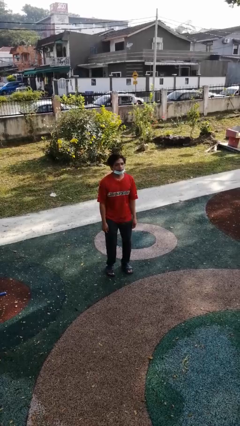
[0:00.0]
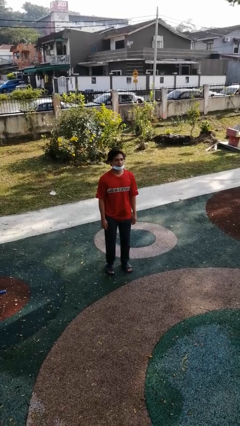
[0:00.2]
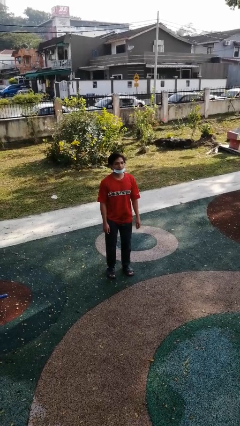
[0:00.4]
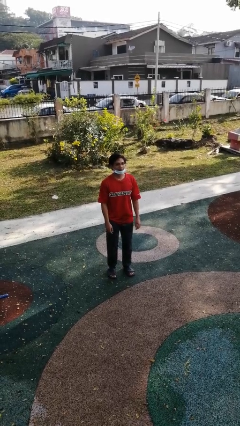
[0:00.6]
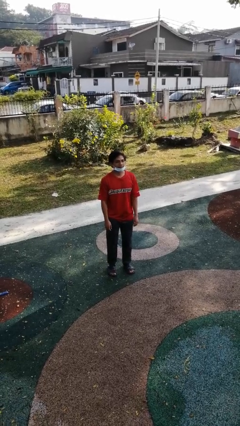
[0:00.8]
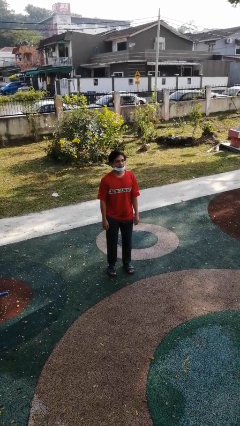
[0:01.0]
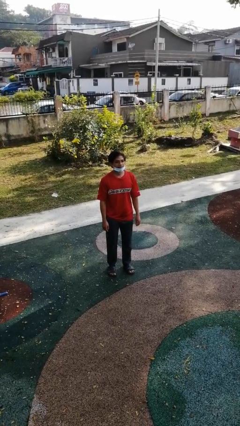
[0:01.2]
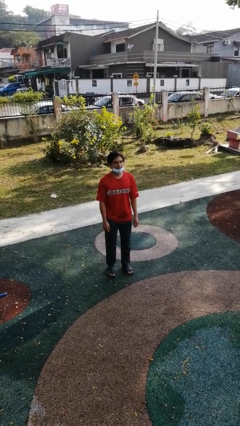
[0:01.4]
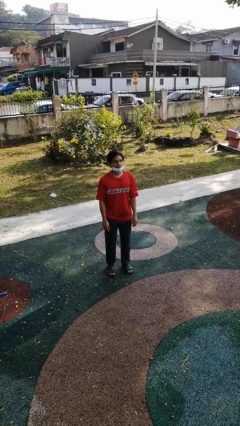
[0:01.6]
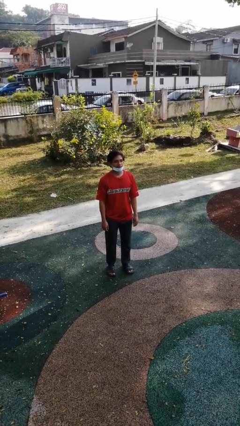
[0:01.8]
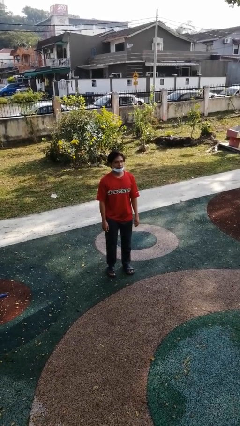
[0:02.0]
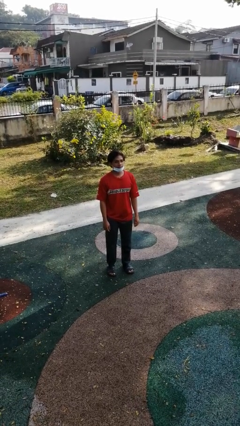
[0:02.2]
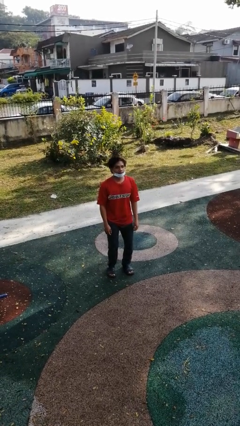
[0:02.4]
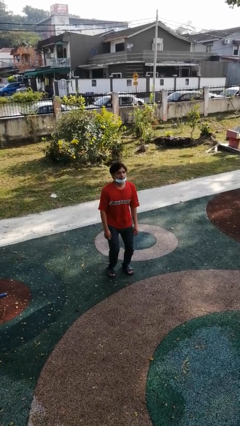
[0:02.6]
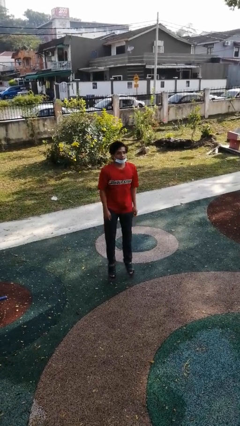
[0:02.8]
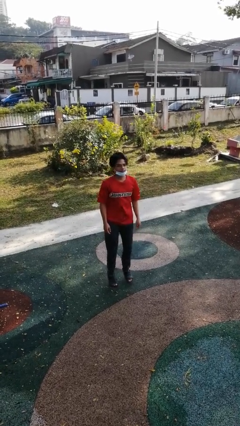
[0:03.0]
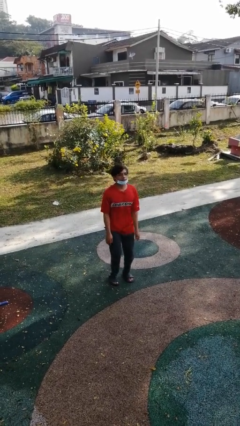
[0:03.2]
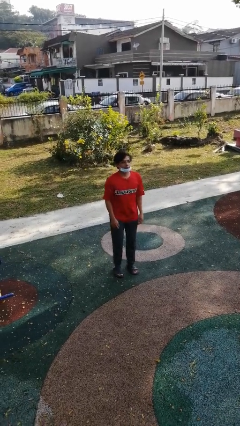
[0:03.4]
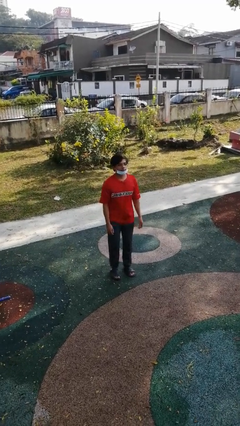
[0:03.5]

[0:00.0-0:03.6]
person jumps

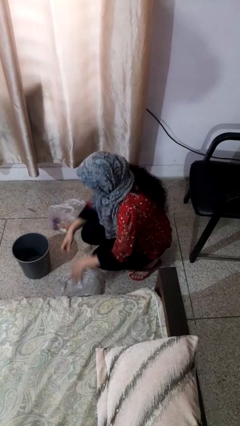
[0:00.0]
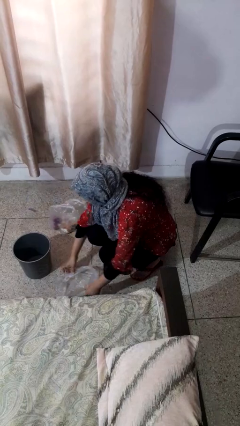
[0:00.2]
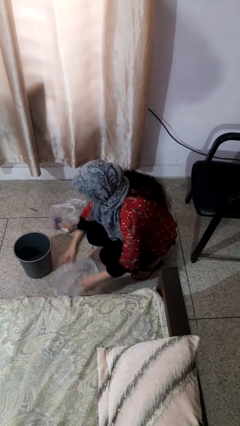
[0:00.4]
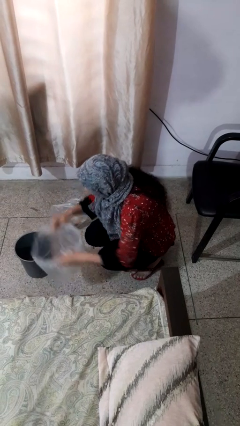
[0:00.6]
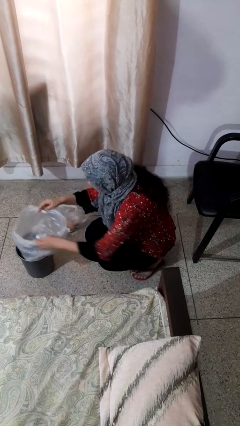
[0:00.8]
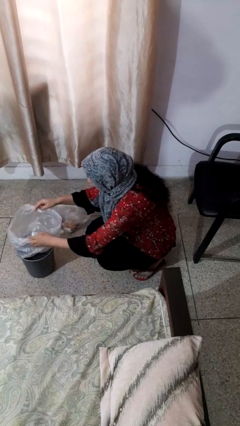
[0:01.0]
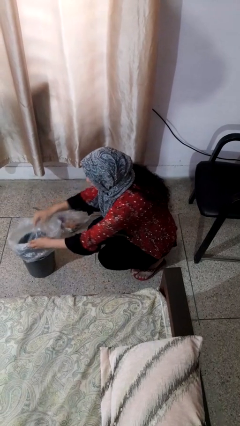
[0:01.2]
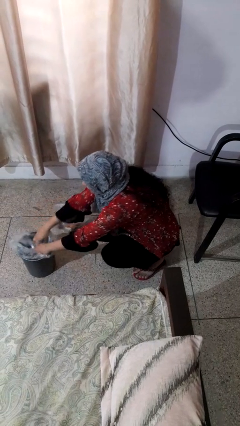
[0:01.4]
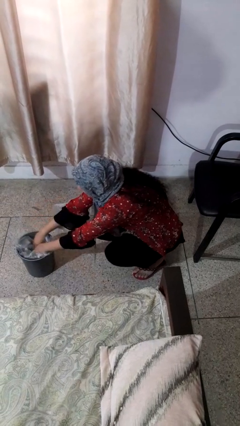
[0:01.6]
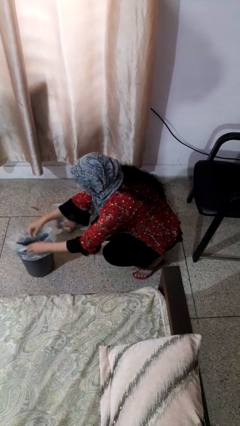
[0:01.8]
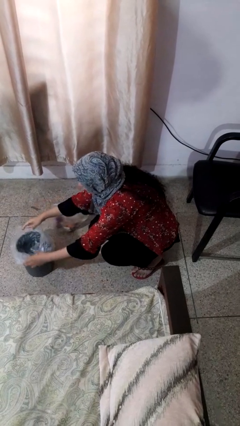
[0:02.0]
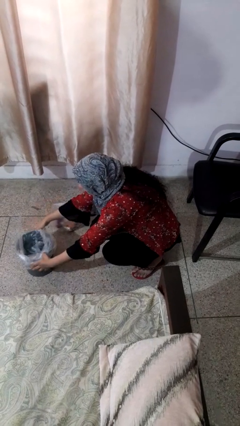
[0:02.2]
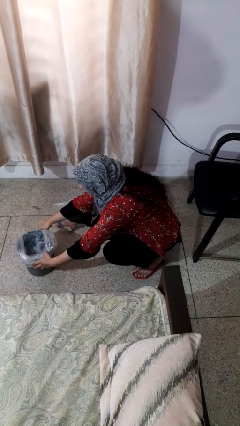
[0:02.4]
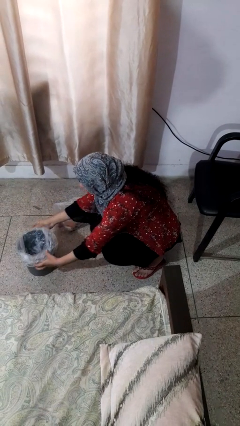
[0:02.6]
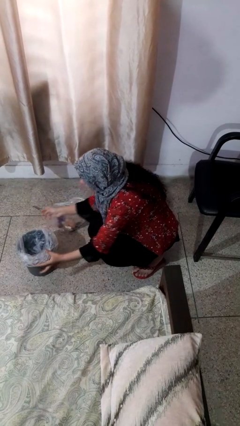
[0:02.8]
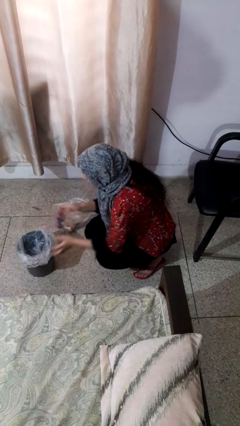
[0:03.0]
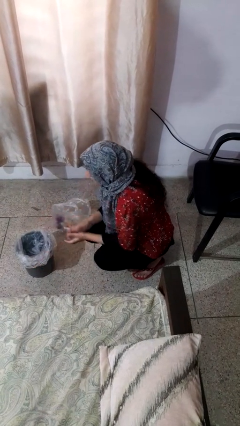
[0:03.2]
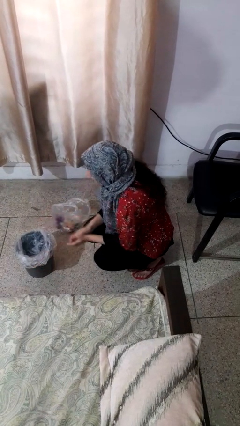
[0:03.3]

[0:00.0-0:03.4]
person inserts trashbag into trashcan

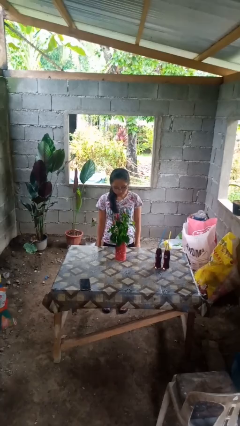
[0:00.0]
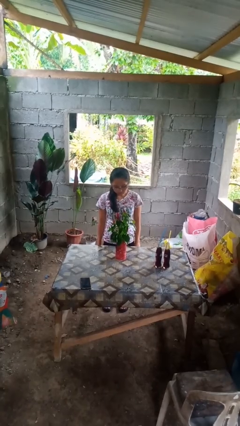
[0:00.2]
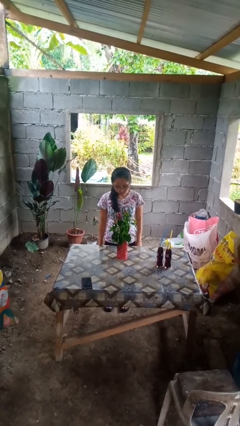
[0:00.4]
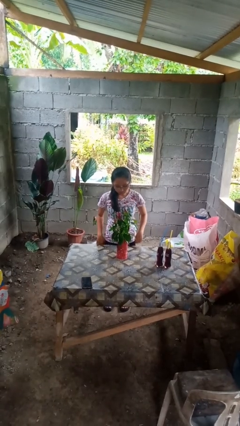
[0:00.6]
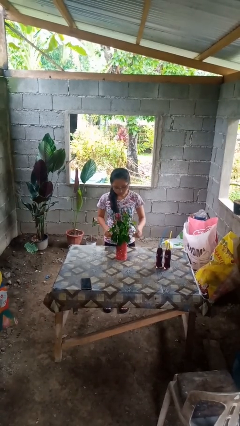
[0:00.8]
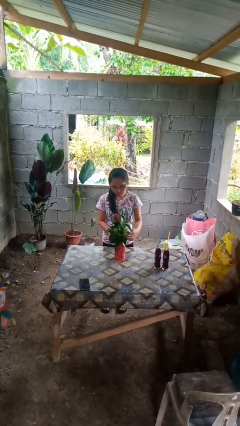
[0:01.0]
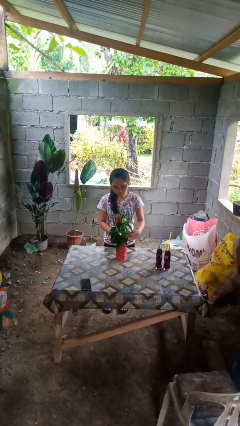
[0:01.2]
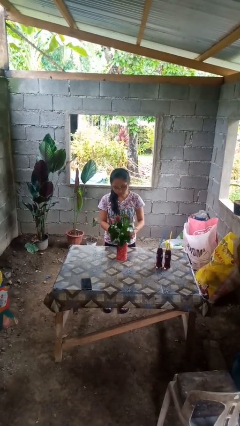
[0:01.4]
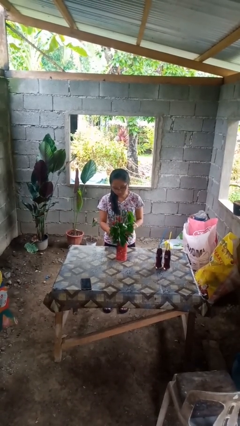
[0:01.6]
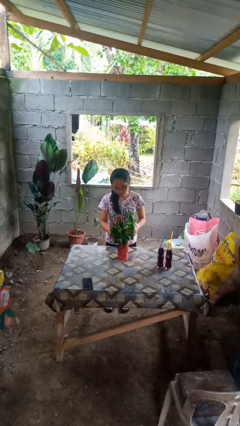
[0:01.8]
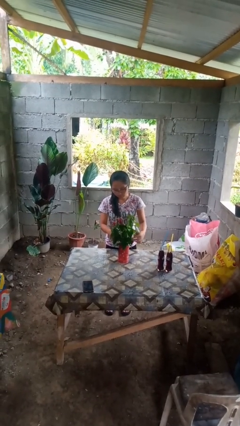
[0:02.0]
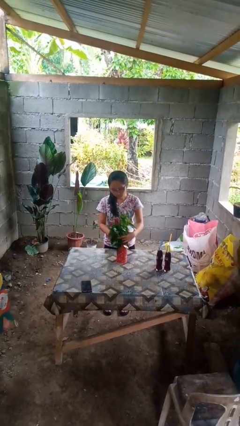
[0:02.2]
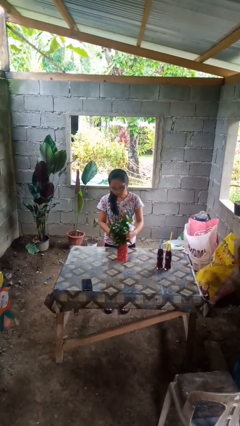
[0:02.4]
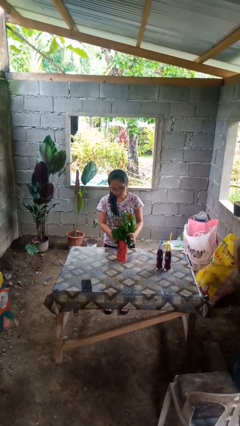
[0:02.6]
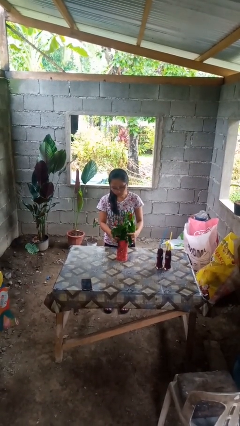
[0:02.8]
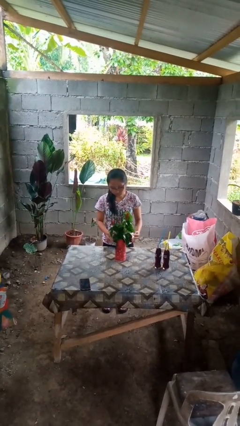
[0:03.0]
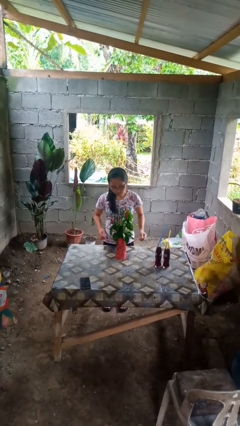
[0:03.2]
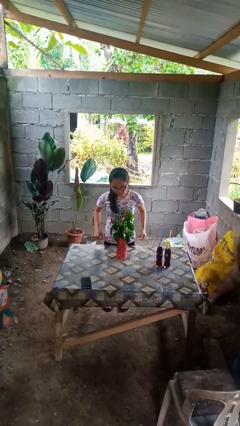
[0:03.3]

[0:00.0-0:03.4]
person arranges flowers in vase

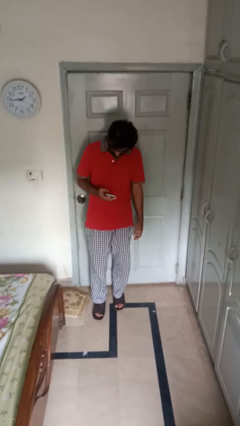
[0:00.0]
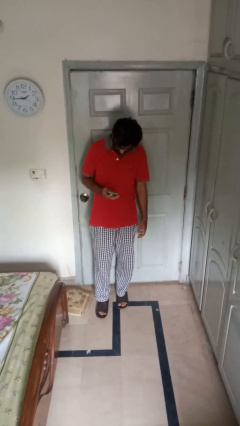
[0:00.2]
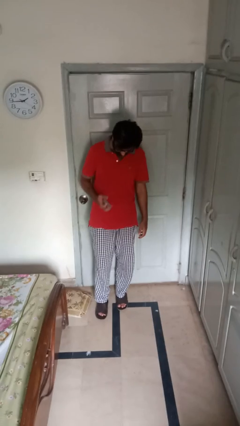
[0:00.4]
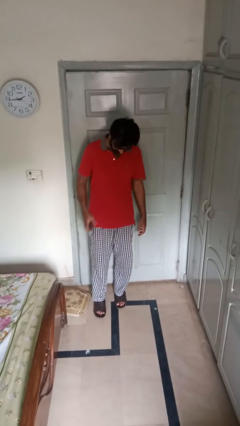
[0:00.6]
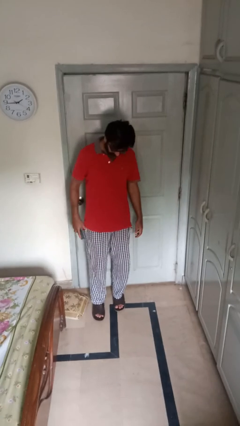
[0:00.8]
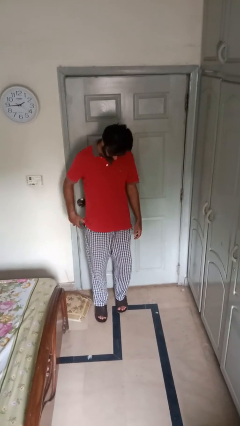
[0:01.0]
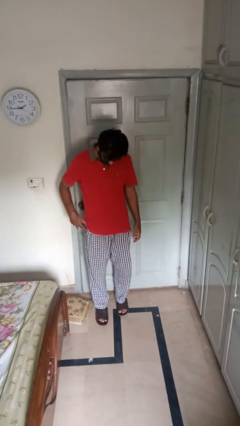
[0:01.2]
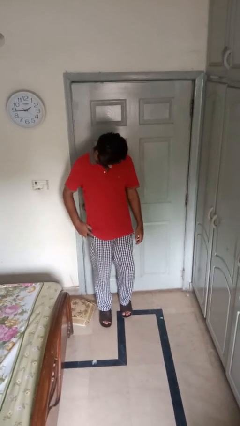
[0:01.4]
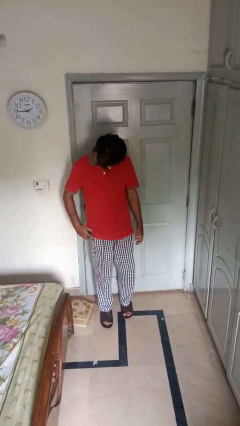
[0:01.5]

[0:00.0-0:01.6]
person puts phone into pocket

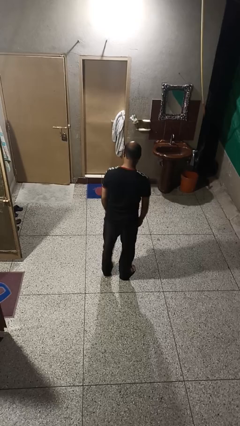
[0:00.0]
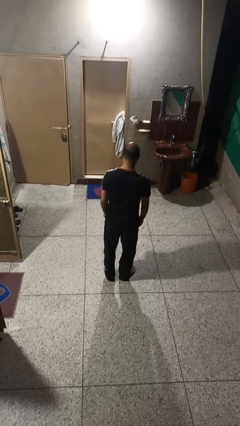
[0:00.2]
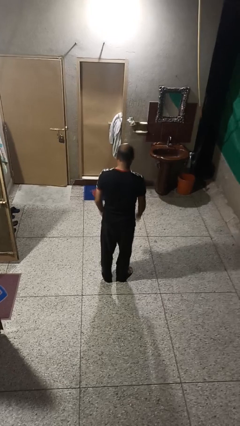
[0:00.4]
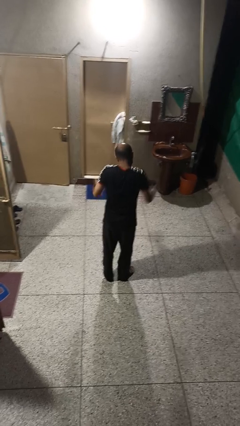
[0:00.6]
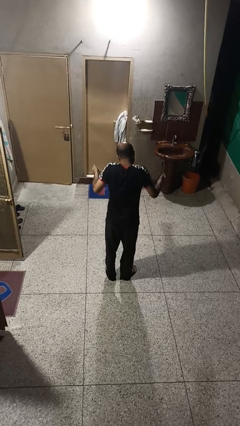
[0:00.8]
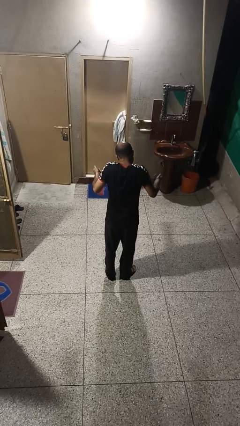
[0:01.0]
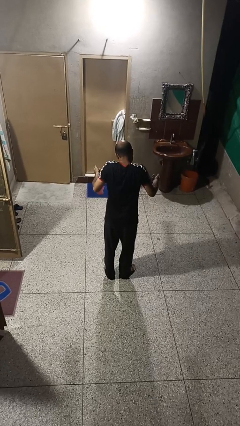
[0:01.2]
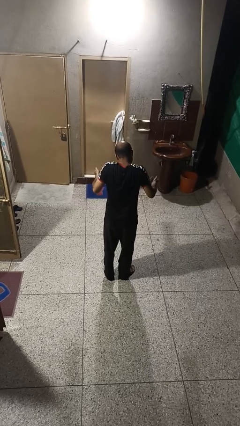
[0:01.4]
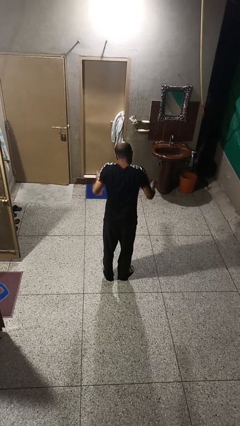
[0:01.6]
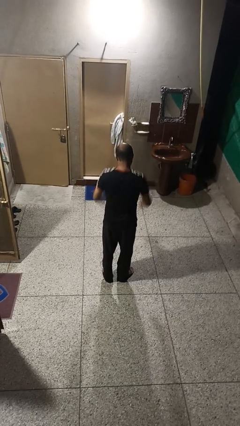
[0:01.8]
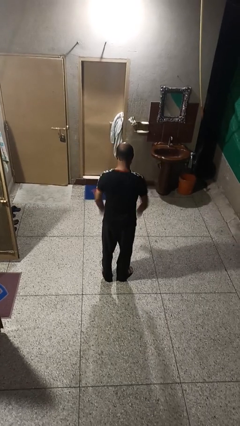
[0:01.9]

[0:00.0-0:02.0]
person shrugs

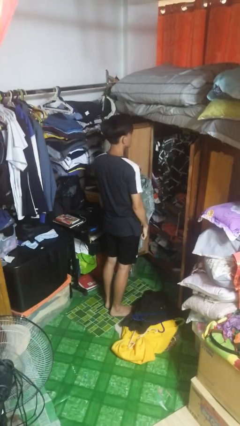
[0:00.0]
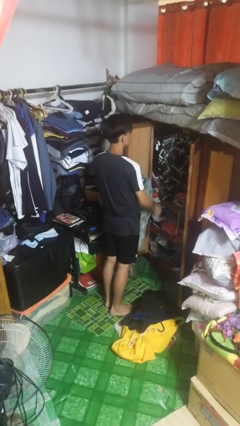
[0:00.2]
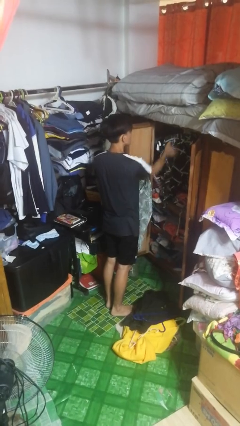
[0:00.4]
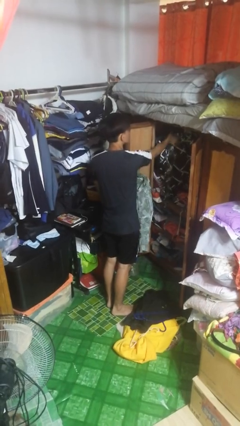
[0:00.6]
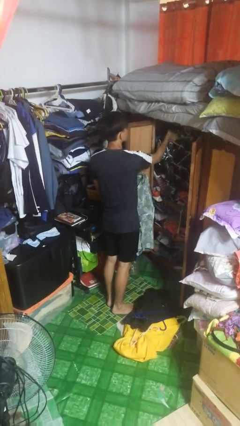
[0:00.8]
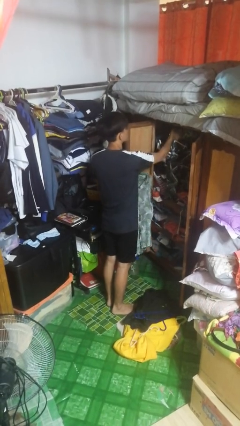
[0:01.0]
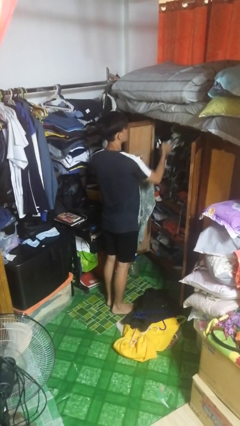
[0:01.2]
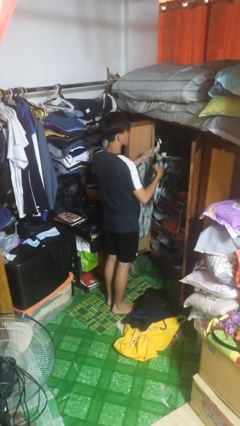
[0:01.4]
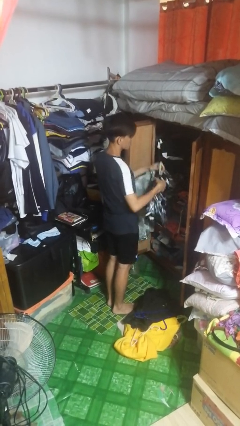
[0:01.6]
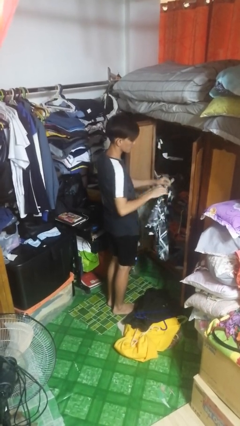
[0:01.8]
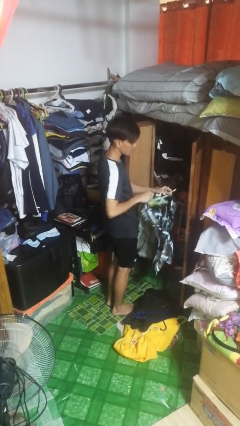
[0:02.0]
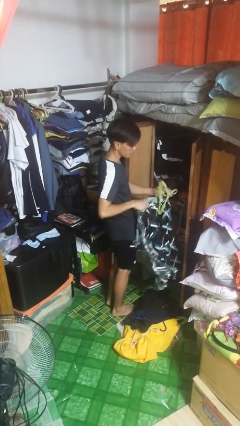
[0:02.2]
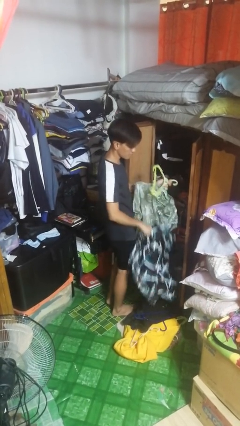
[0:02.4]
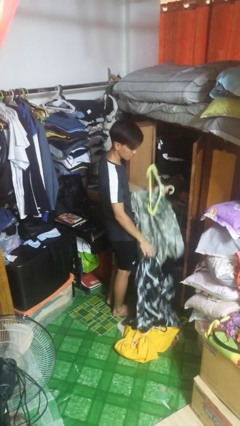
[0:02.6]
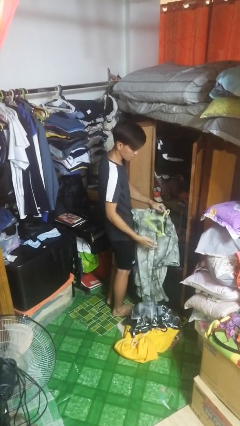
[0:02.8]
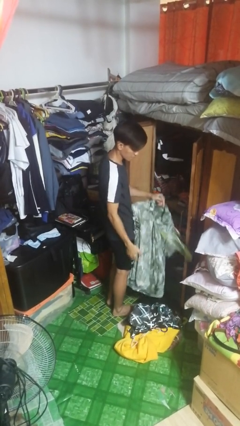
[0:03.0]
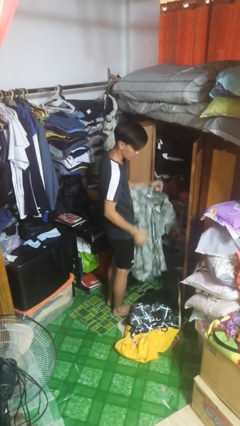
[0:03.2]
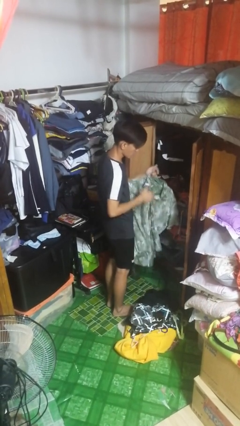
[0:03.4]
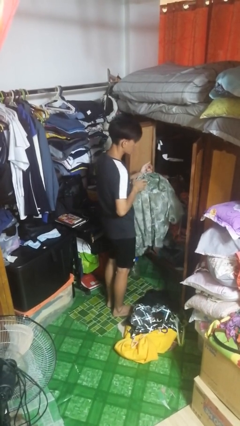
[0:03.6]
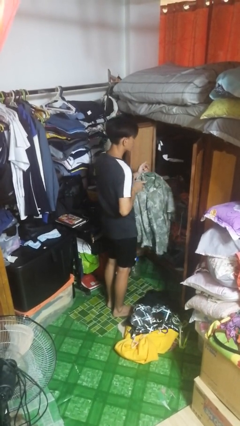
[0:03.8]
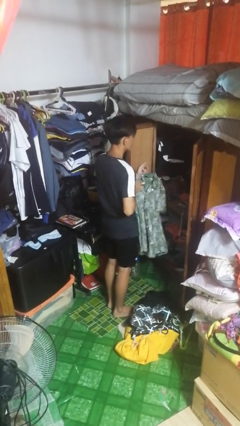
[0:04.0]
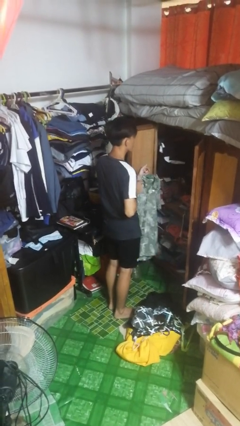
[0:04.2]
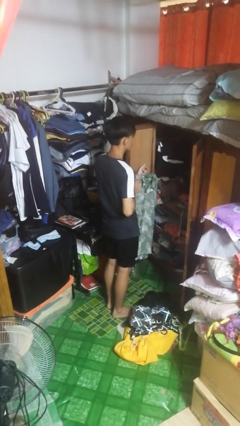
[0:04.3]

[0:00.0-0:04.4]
person takes clothes from closet
